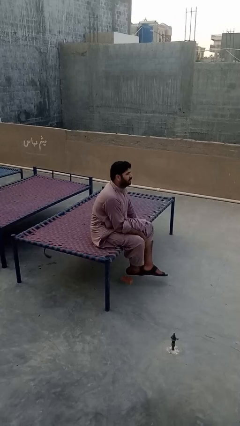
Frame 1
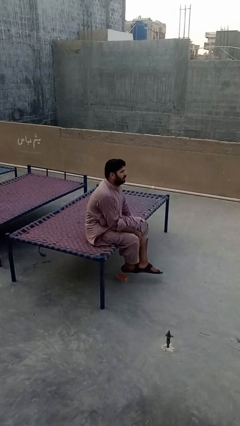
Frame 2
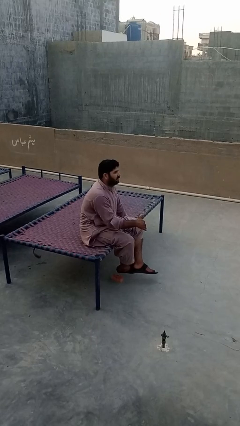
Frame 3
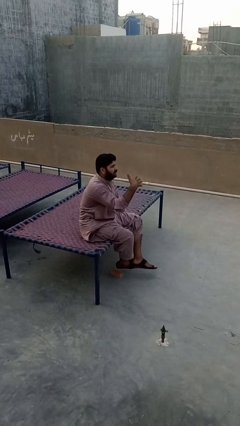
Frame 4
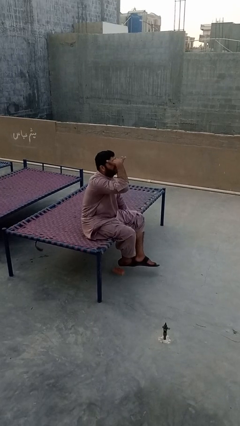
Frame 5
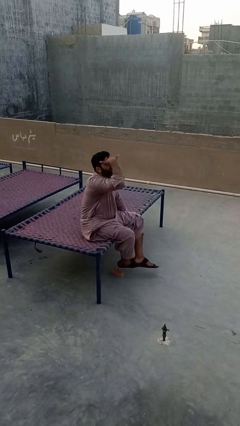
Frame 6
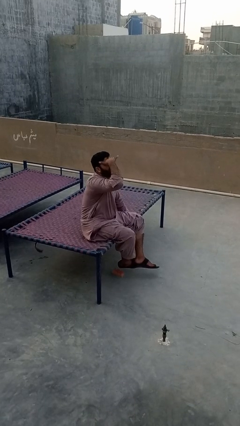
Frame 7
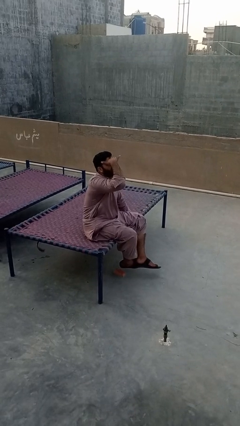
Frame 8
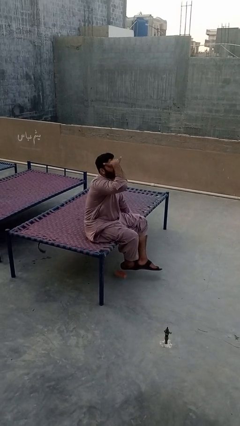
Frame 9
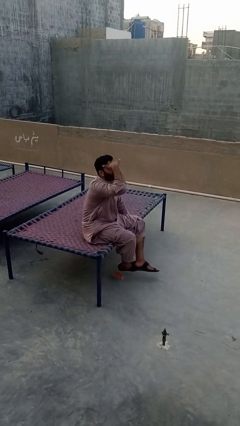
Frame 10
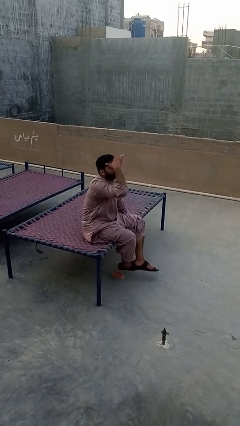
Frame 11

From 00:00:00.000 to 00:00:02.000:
person shades eyes

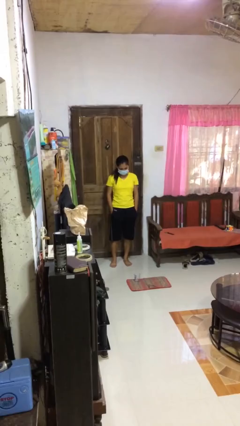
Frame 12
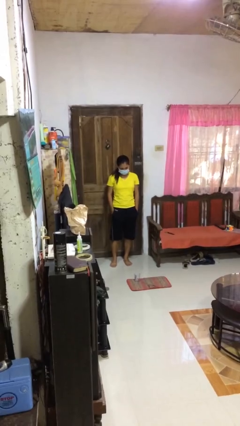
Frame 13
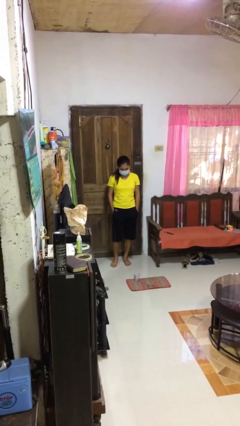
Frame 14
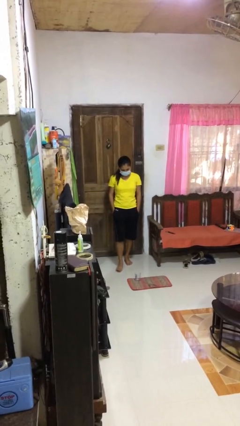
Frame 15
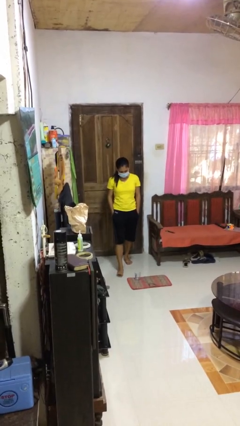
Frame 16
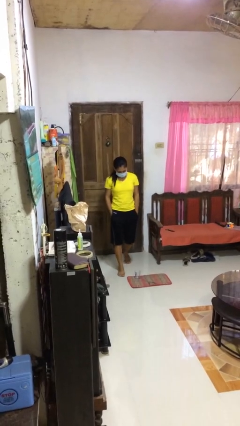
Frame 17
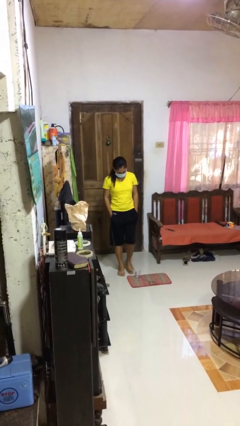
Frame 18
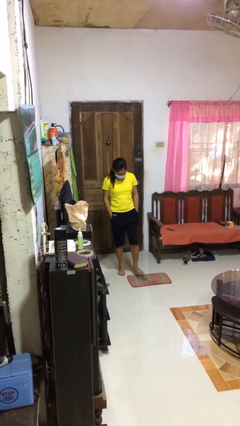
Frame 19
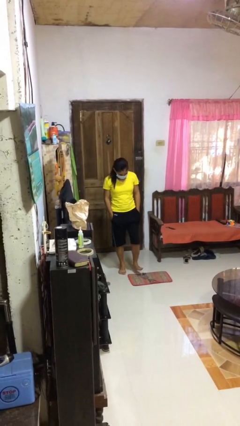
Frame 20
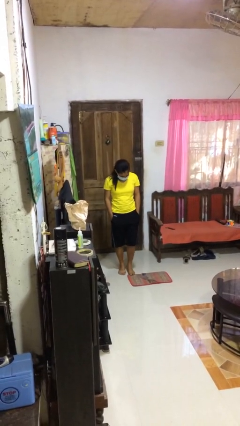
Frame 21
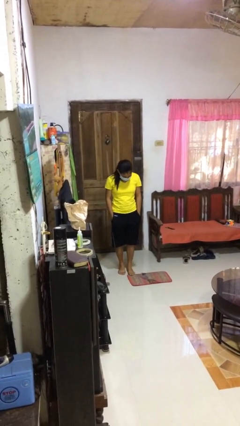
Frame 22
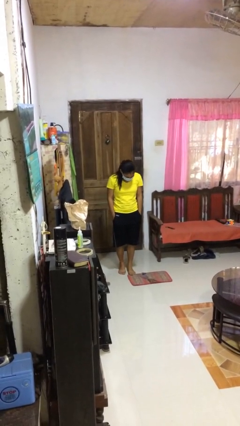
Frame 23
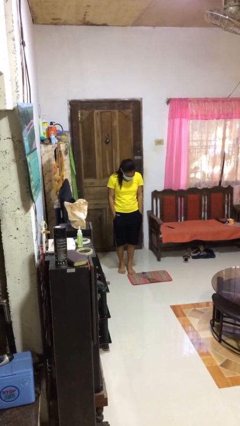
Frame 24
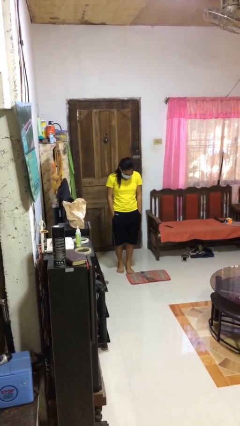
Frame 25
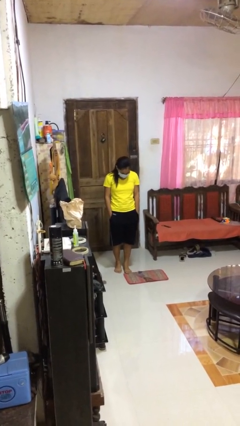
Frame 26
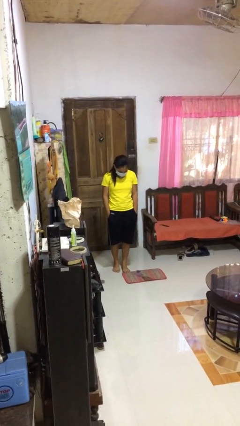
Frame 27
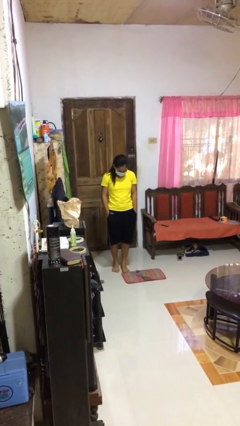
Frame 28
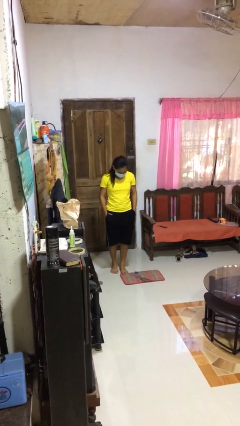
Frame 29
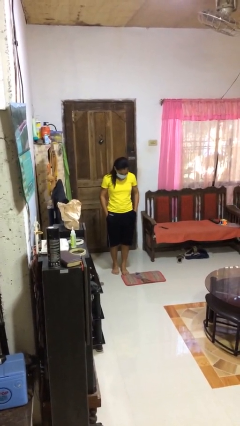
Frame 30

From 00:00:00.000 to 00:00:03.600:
person spills on floor

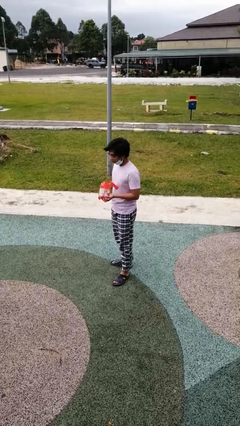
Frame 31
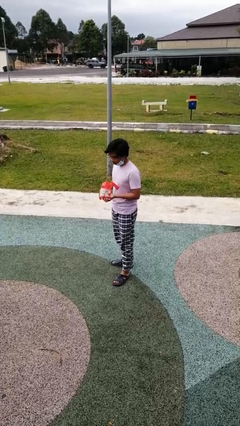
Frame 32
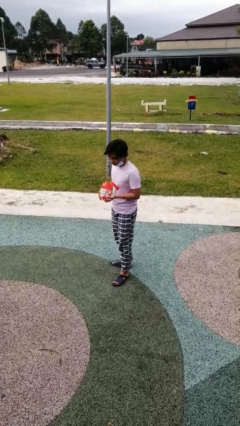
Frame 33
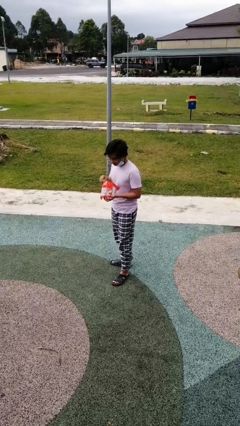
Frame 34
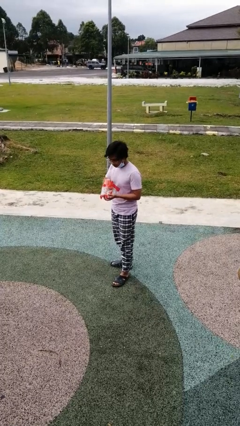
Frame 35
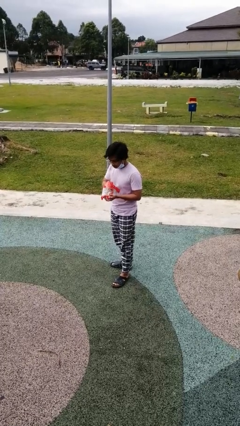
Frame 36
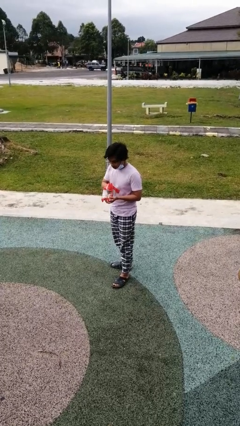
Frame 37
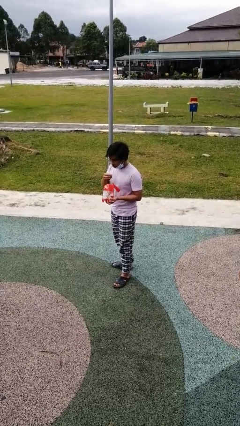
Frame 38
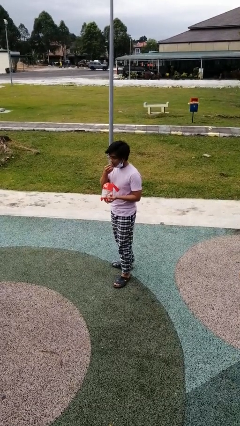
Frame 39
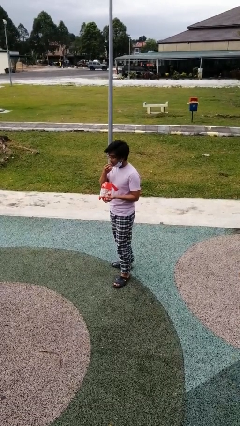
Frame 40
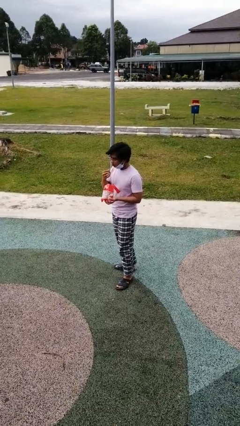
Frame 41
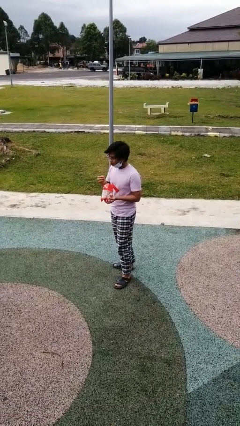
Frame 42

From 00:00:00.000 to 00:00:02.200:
person eats snack from bag

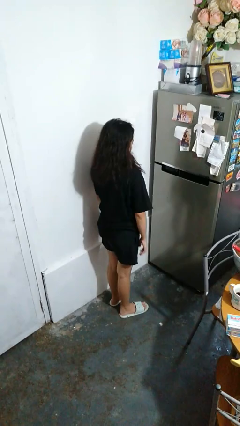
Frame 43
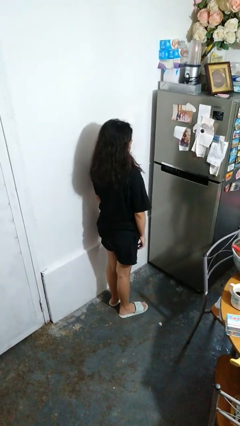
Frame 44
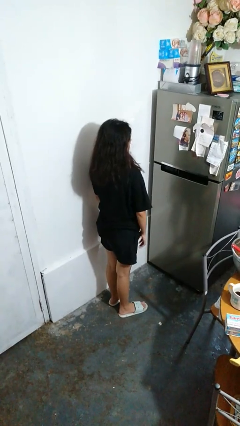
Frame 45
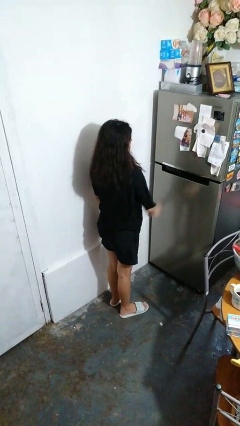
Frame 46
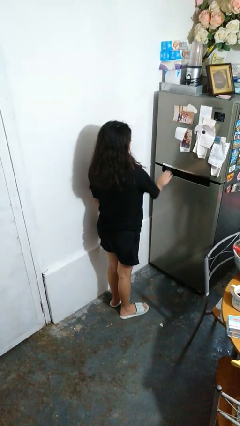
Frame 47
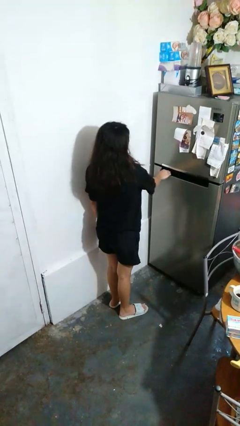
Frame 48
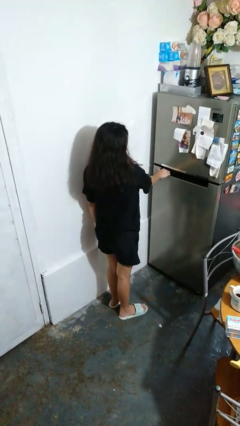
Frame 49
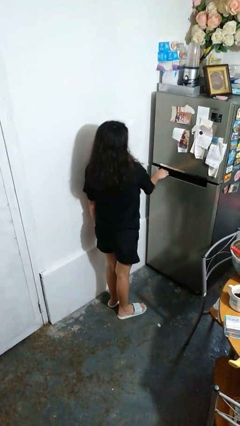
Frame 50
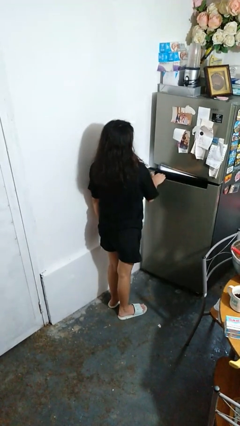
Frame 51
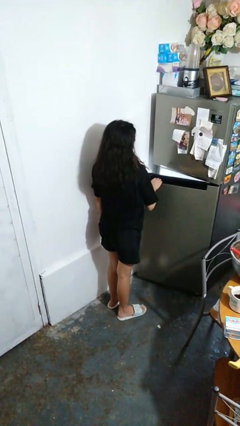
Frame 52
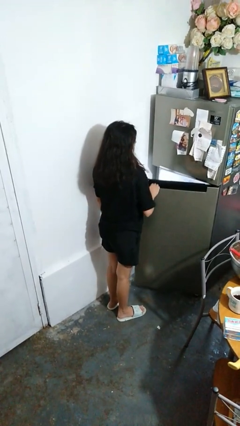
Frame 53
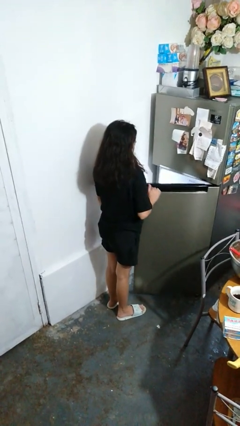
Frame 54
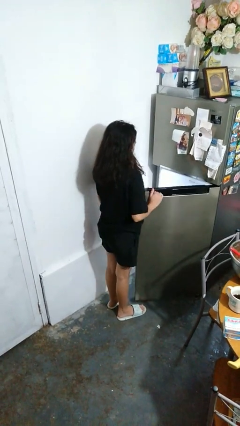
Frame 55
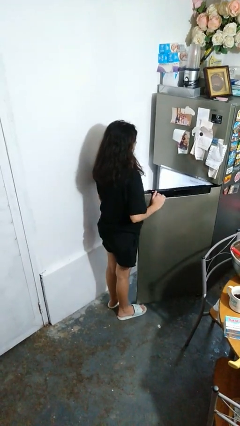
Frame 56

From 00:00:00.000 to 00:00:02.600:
person opens refrigerator

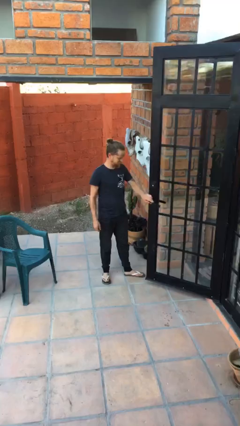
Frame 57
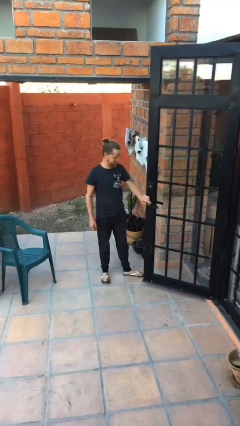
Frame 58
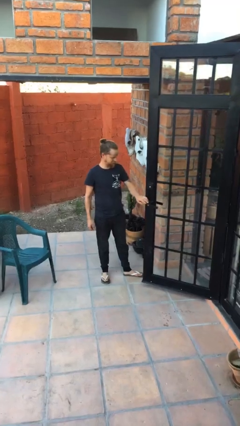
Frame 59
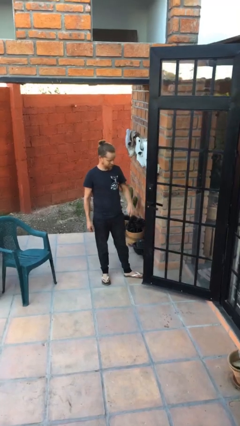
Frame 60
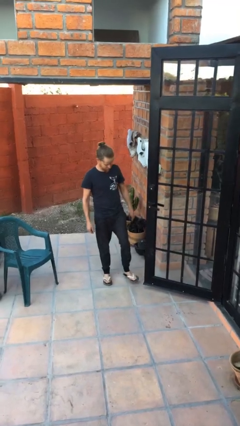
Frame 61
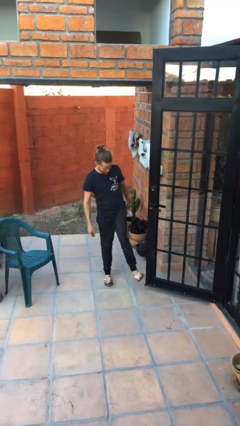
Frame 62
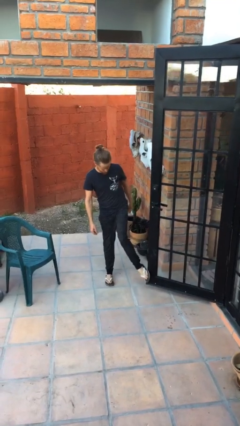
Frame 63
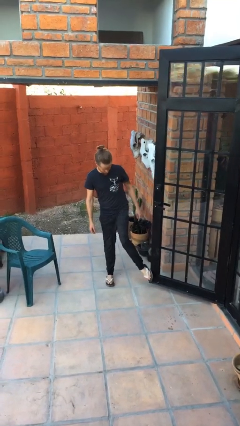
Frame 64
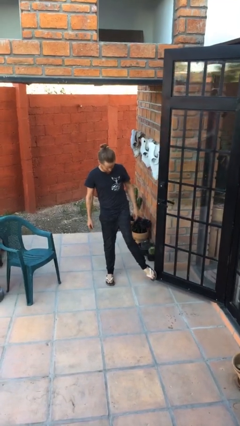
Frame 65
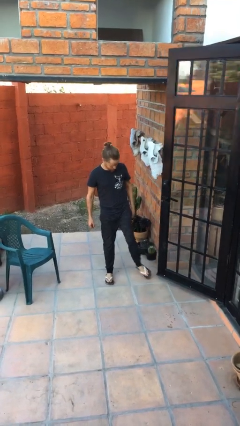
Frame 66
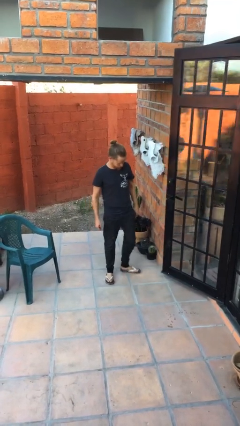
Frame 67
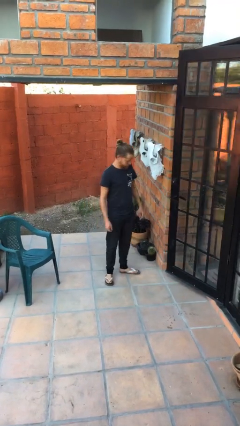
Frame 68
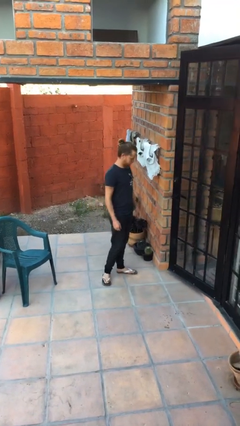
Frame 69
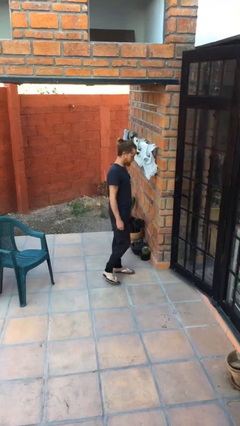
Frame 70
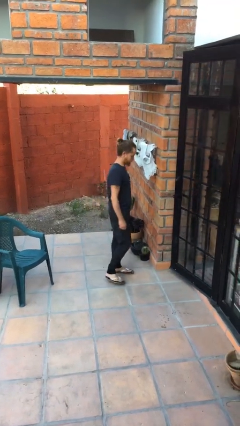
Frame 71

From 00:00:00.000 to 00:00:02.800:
person closes door with foot

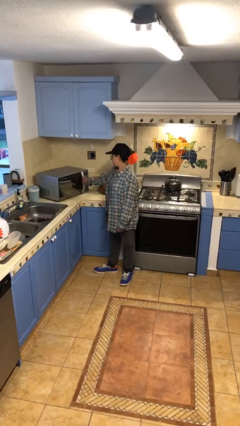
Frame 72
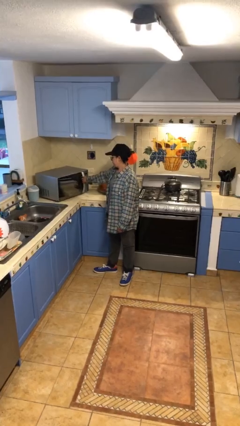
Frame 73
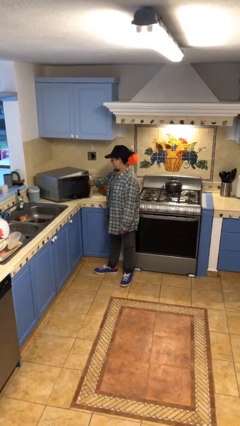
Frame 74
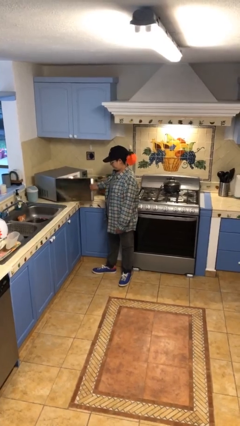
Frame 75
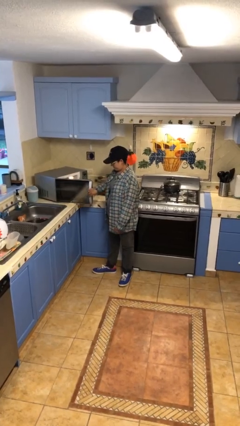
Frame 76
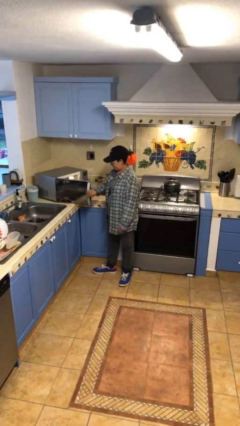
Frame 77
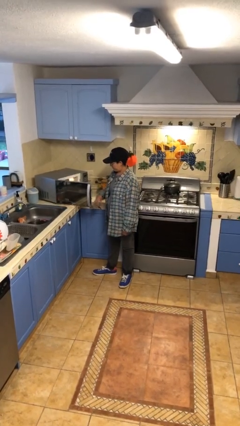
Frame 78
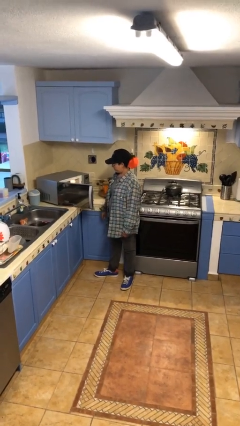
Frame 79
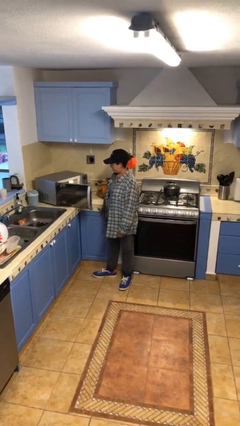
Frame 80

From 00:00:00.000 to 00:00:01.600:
person opens microwave

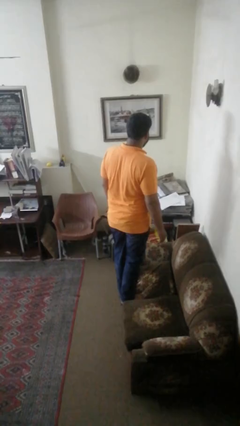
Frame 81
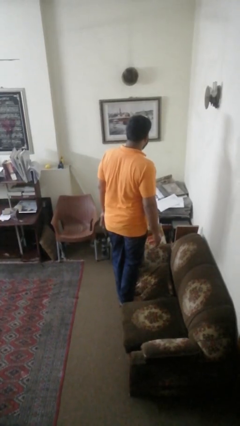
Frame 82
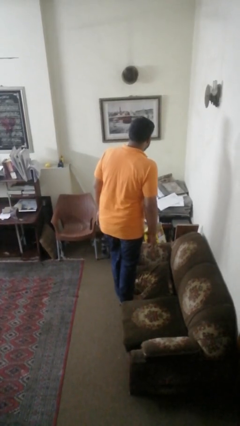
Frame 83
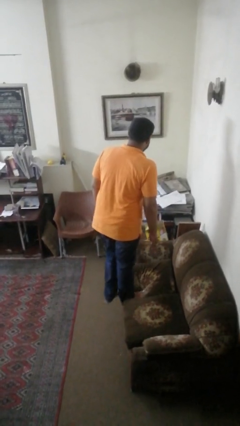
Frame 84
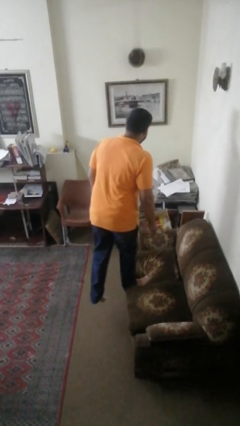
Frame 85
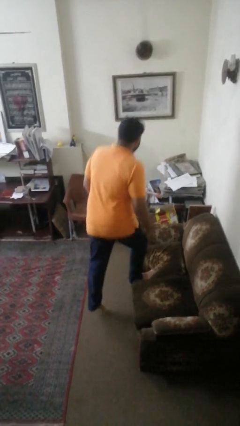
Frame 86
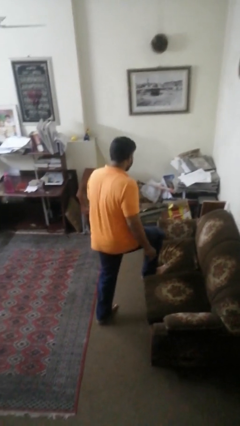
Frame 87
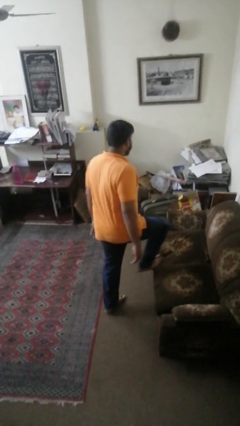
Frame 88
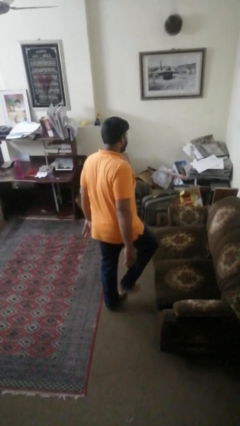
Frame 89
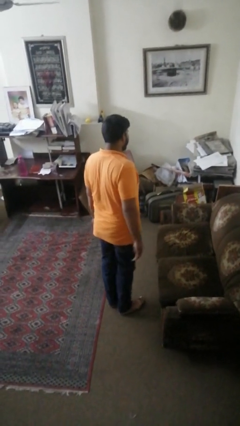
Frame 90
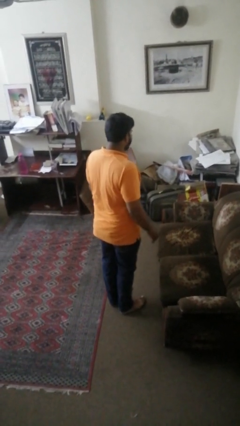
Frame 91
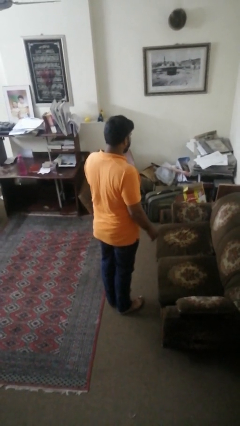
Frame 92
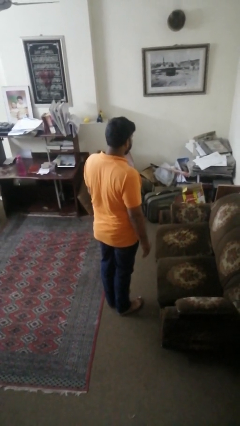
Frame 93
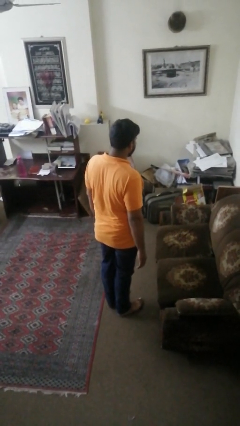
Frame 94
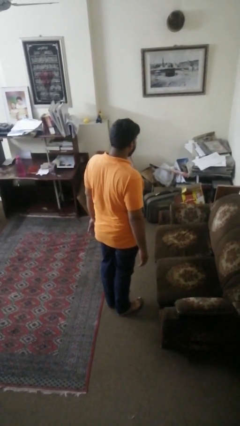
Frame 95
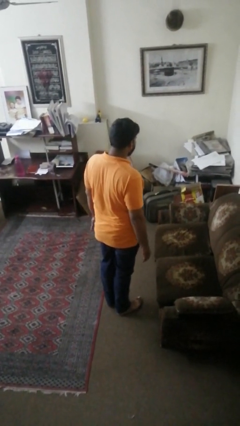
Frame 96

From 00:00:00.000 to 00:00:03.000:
person climbs off couch
